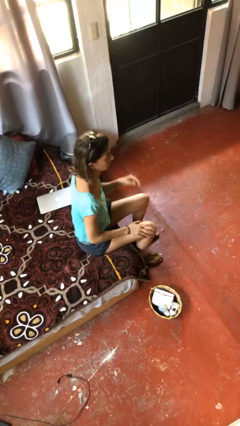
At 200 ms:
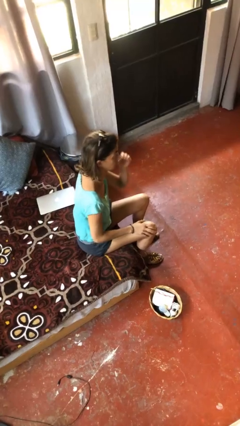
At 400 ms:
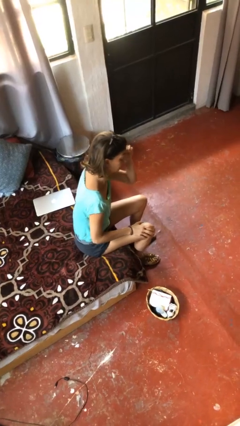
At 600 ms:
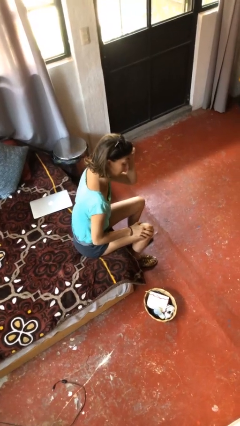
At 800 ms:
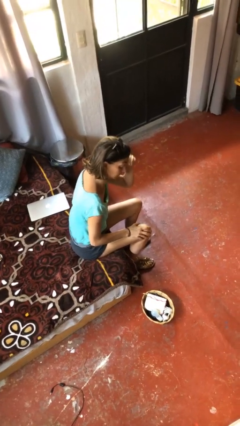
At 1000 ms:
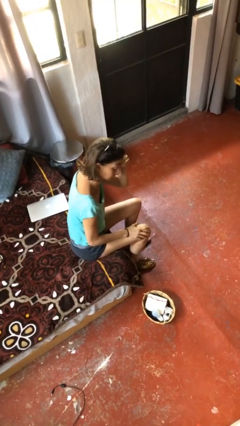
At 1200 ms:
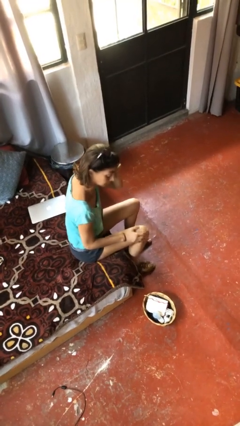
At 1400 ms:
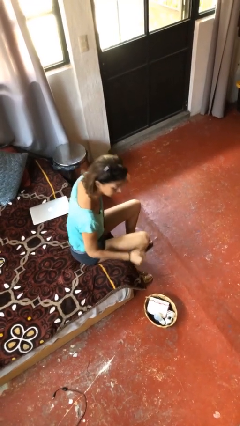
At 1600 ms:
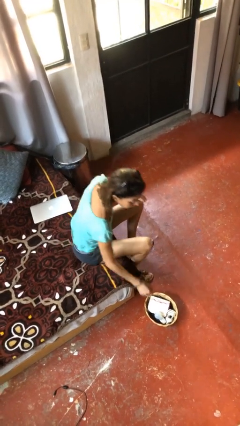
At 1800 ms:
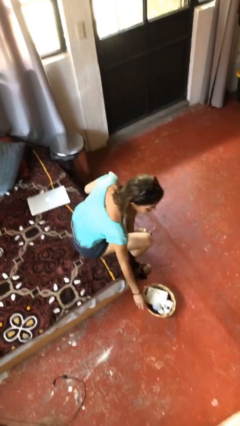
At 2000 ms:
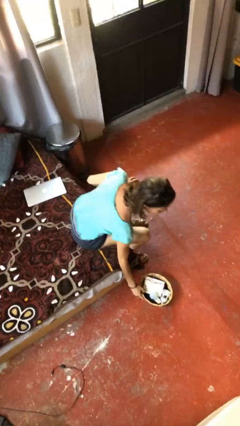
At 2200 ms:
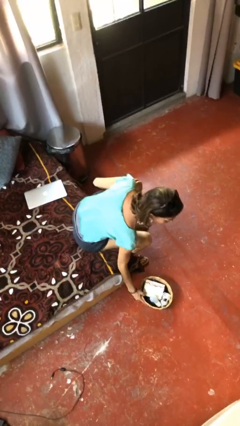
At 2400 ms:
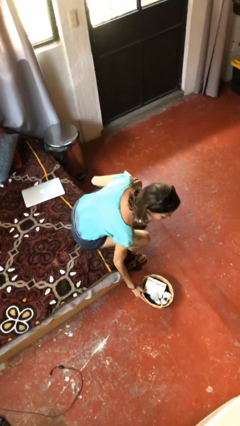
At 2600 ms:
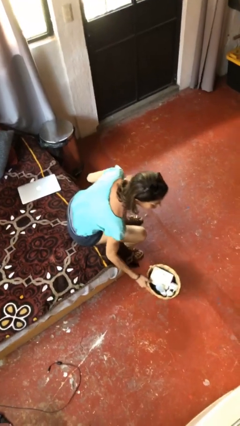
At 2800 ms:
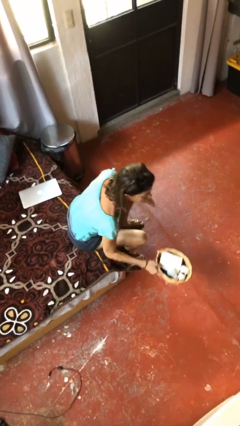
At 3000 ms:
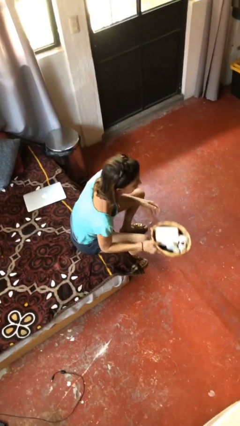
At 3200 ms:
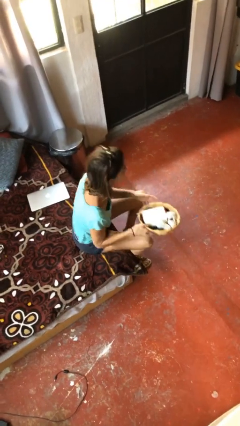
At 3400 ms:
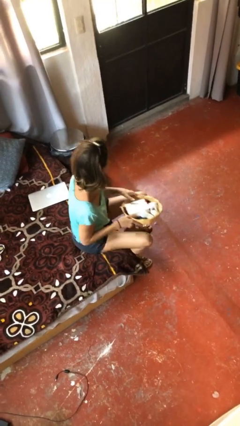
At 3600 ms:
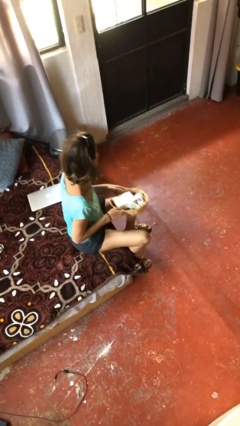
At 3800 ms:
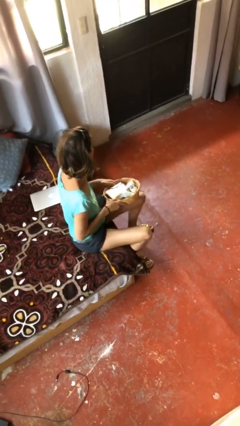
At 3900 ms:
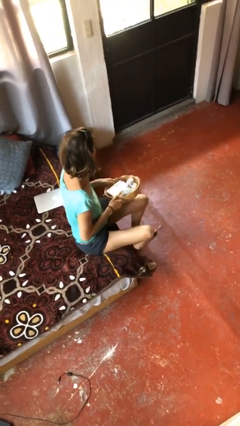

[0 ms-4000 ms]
person picks up object from floor

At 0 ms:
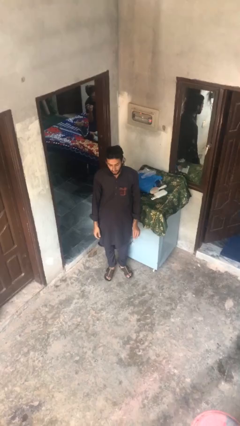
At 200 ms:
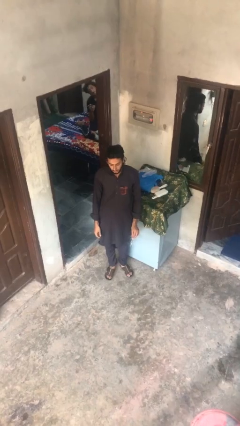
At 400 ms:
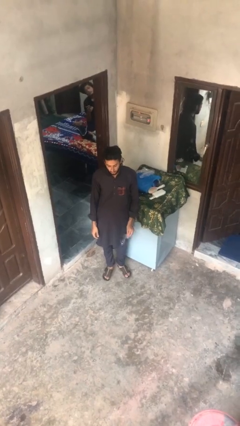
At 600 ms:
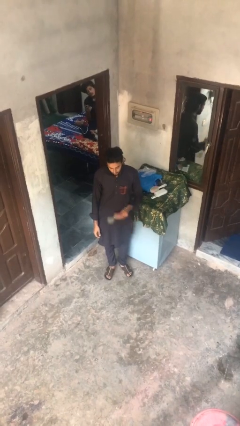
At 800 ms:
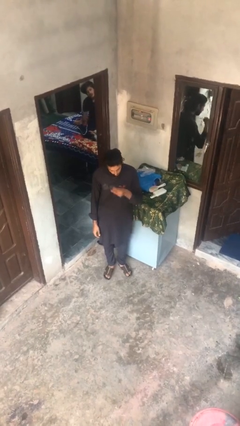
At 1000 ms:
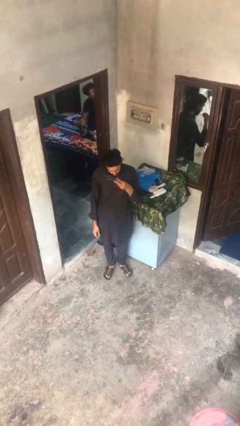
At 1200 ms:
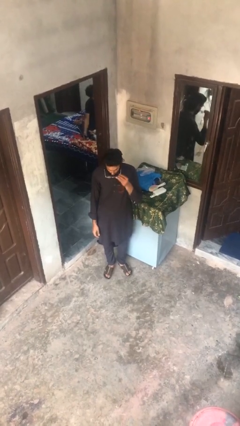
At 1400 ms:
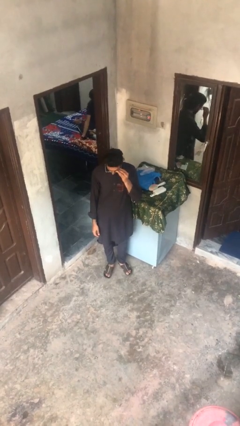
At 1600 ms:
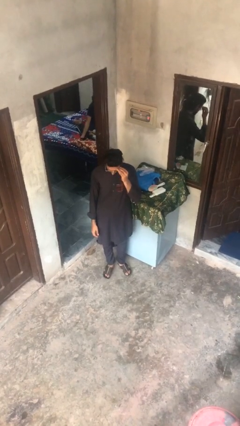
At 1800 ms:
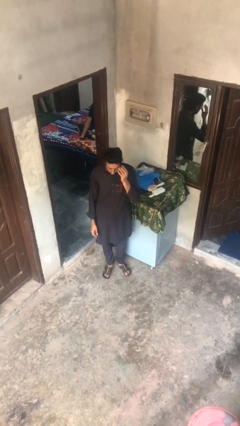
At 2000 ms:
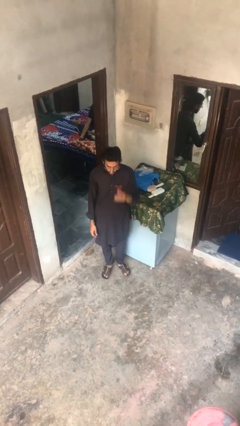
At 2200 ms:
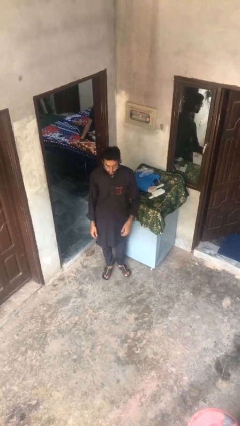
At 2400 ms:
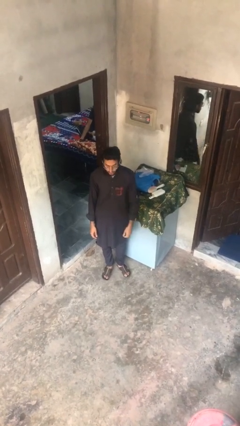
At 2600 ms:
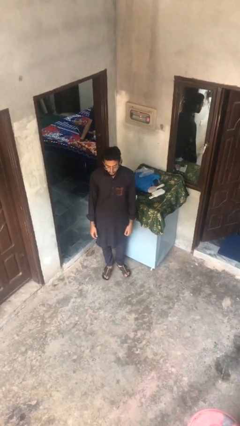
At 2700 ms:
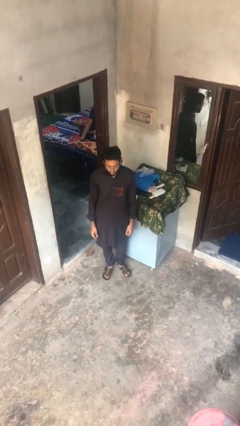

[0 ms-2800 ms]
person puts on glasses

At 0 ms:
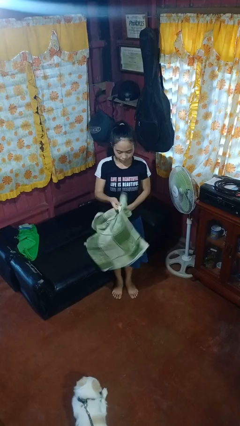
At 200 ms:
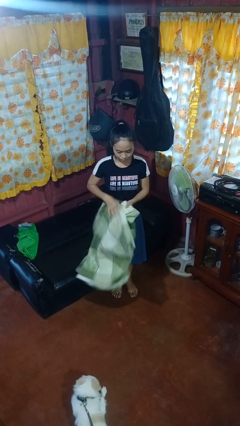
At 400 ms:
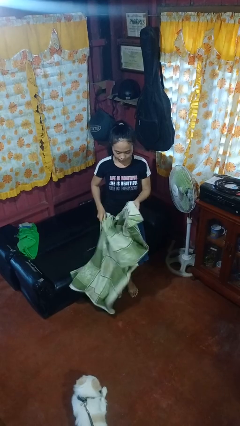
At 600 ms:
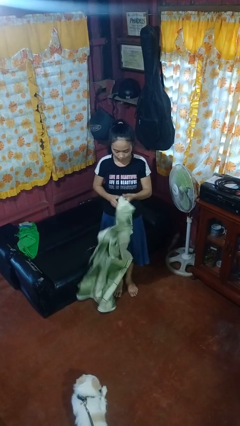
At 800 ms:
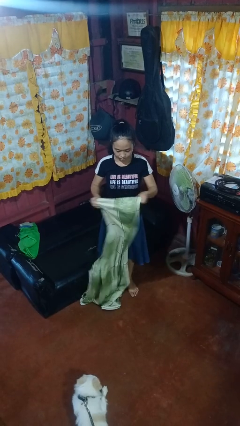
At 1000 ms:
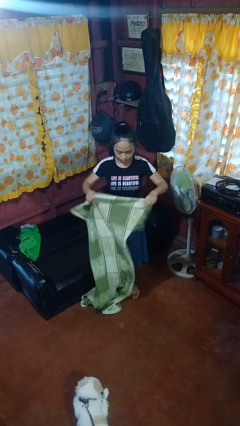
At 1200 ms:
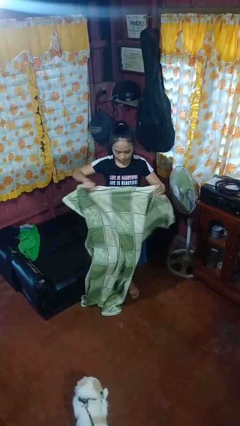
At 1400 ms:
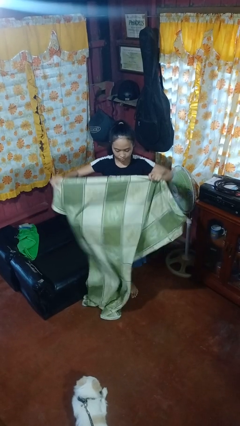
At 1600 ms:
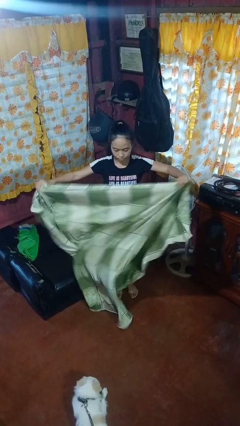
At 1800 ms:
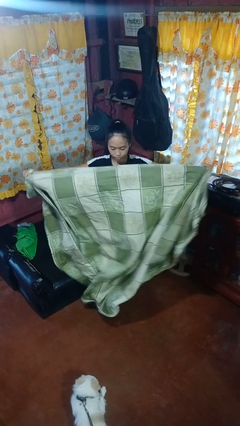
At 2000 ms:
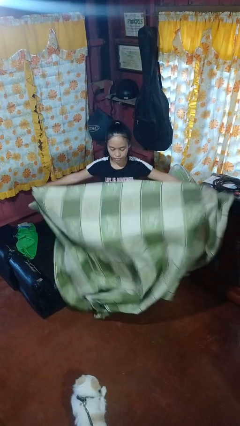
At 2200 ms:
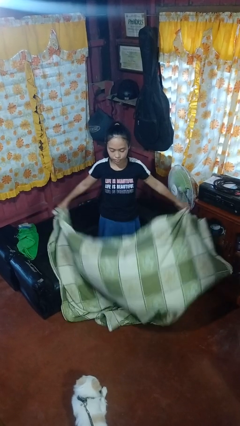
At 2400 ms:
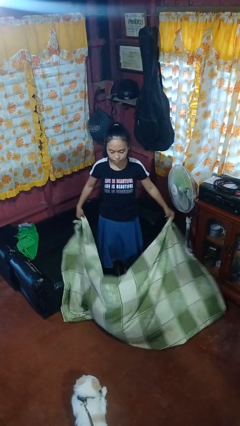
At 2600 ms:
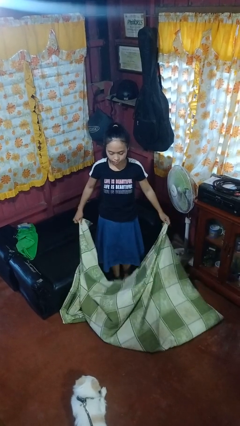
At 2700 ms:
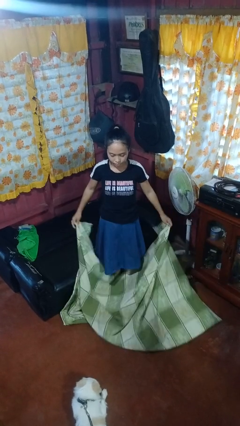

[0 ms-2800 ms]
person unfolds blanket

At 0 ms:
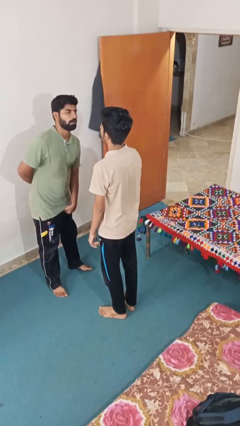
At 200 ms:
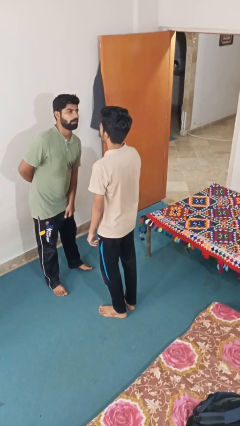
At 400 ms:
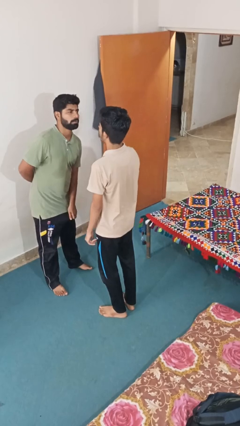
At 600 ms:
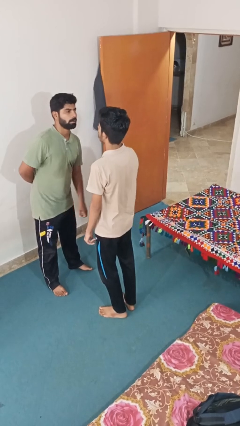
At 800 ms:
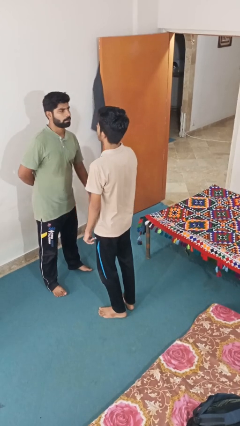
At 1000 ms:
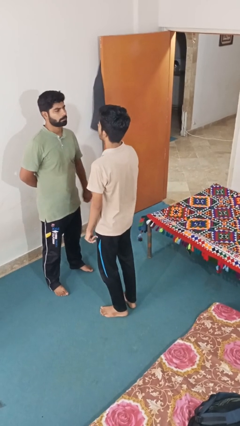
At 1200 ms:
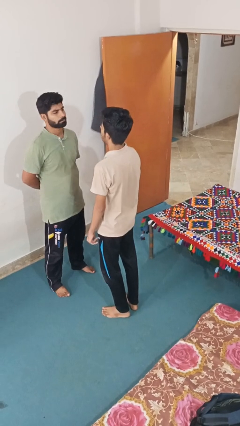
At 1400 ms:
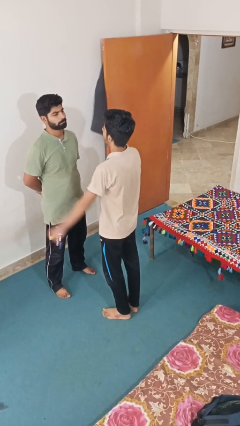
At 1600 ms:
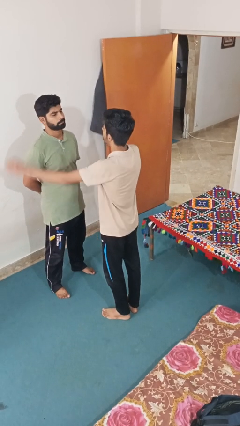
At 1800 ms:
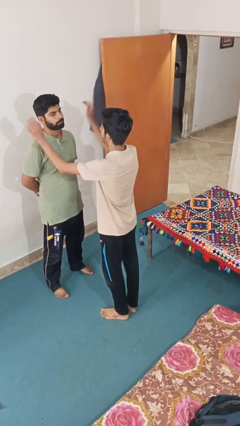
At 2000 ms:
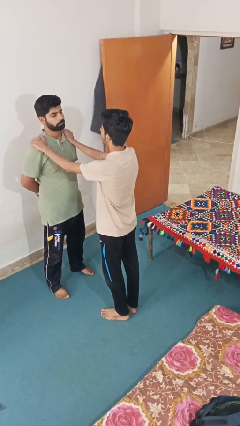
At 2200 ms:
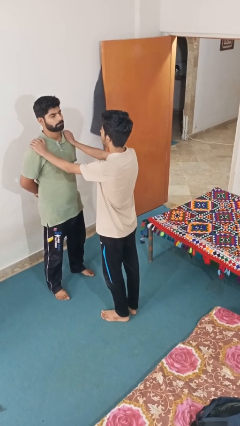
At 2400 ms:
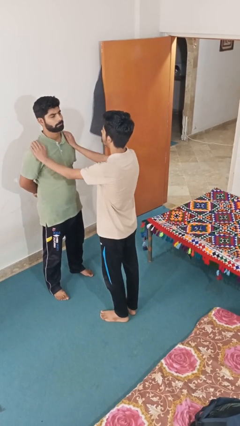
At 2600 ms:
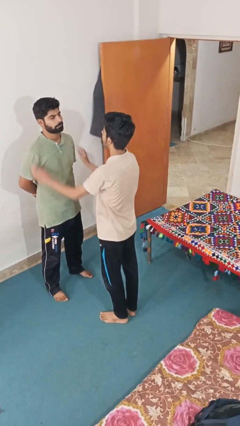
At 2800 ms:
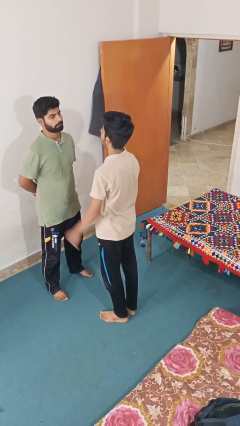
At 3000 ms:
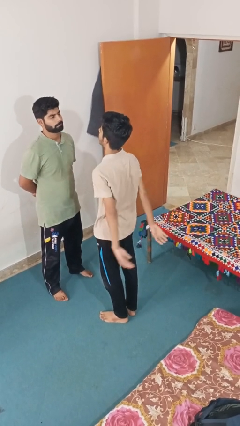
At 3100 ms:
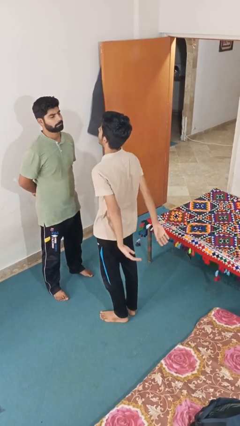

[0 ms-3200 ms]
person pounds shoulders of person

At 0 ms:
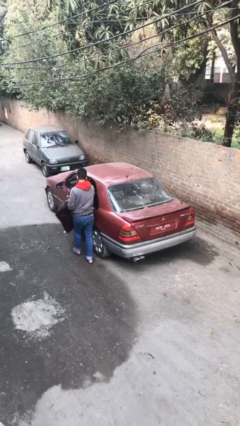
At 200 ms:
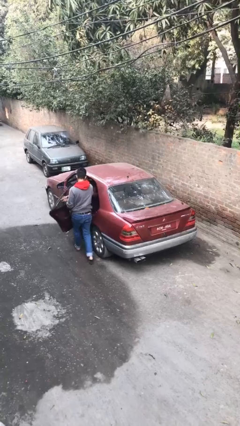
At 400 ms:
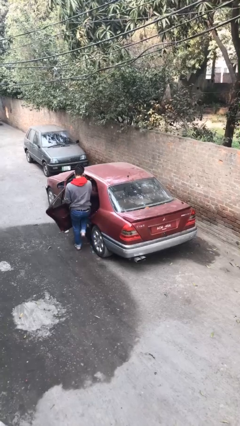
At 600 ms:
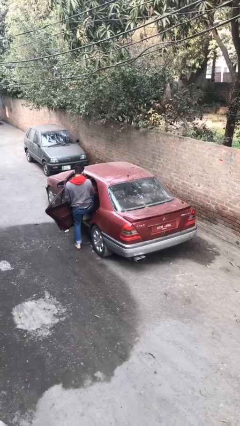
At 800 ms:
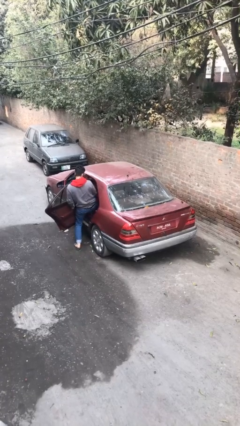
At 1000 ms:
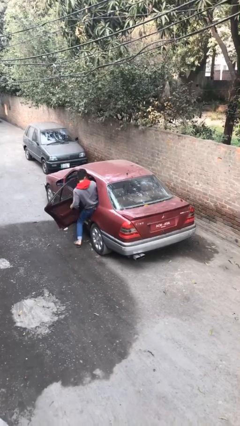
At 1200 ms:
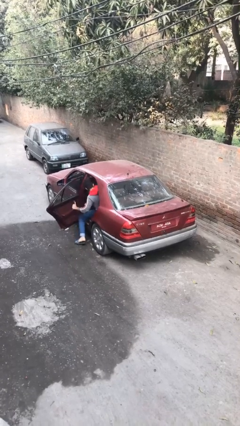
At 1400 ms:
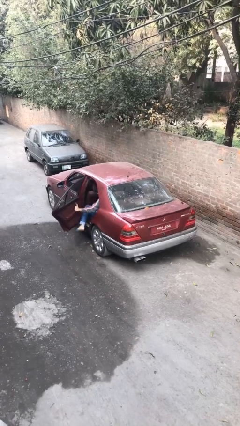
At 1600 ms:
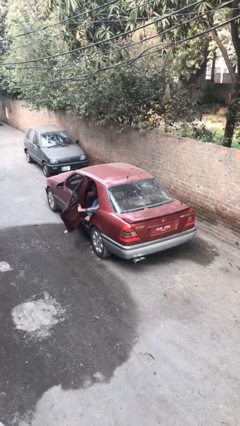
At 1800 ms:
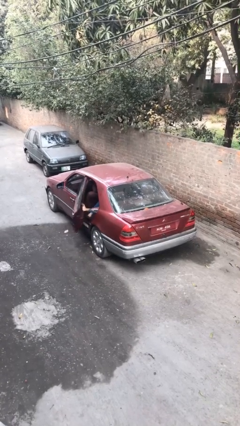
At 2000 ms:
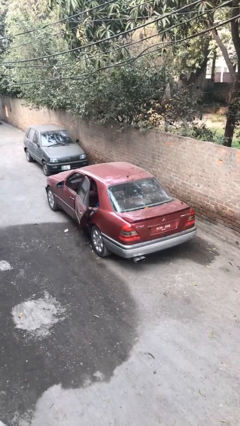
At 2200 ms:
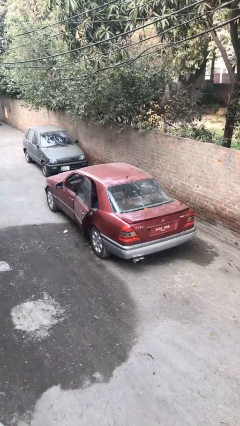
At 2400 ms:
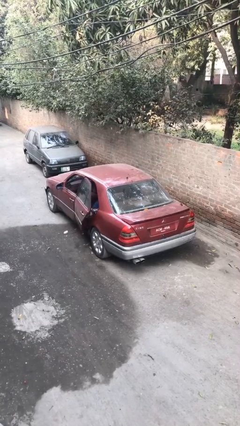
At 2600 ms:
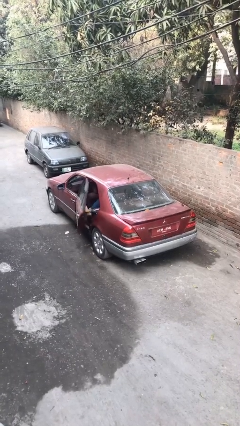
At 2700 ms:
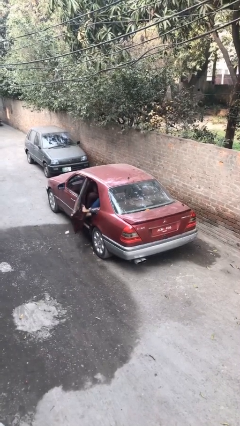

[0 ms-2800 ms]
car picks up person

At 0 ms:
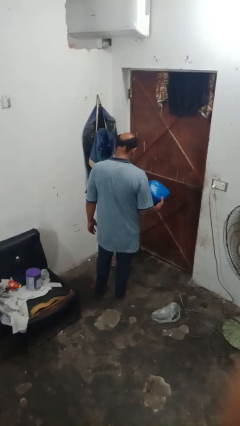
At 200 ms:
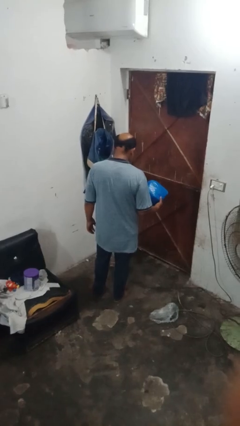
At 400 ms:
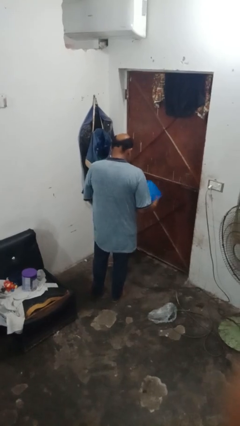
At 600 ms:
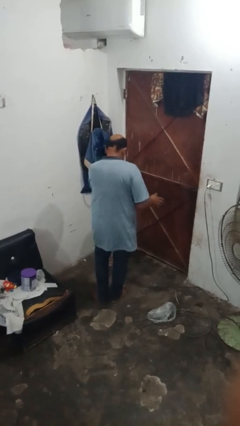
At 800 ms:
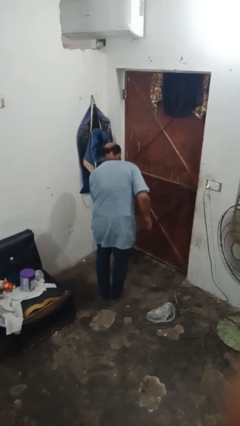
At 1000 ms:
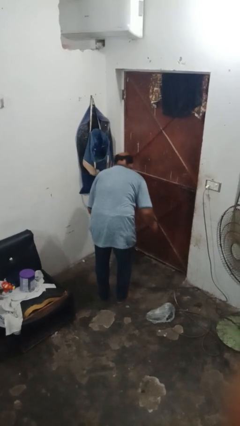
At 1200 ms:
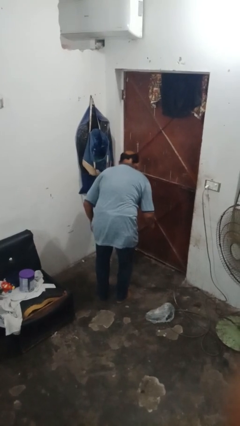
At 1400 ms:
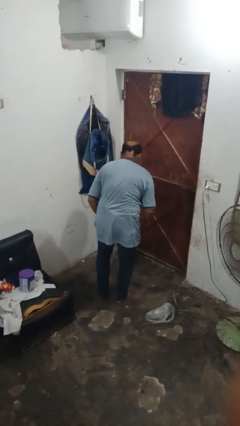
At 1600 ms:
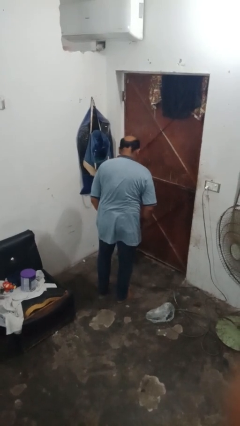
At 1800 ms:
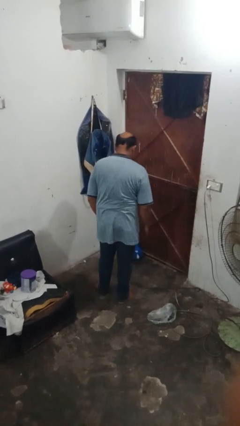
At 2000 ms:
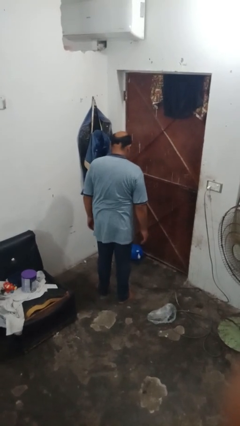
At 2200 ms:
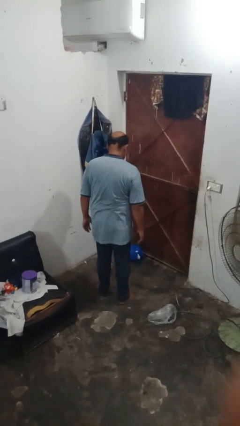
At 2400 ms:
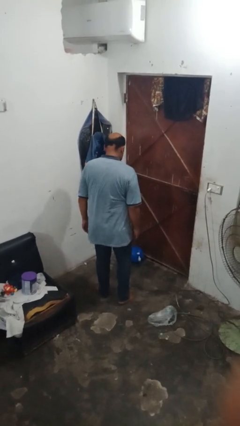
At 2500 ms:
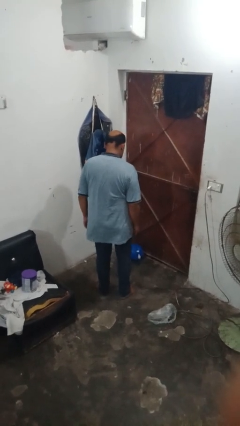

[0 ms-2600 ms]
person trips on object on floor
